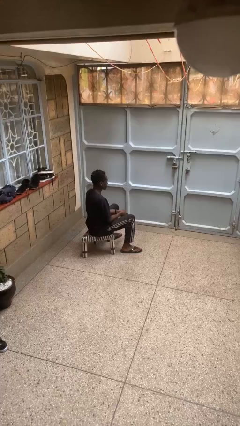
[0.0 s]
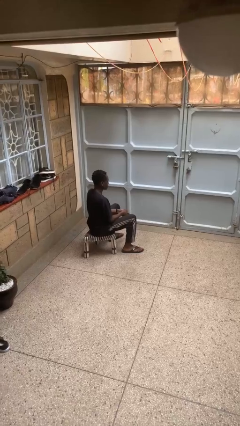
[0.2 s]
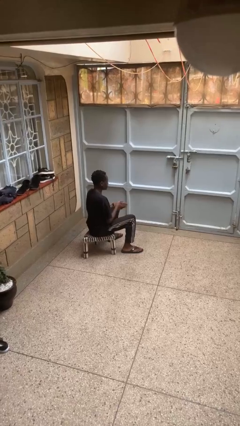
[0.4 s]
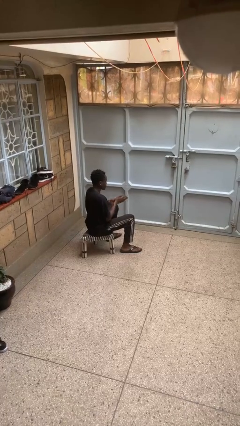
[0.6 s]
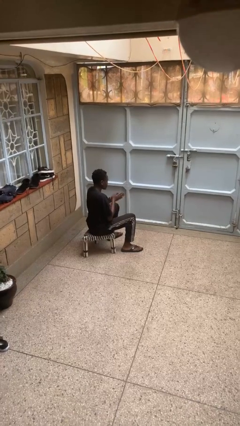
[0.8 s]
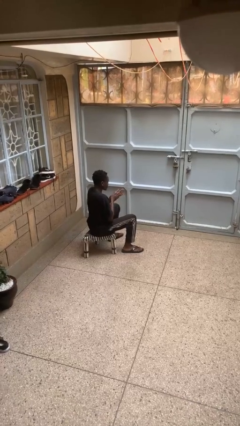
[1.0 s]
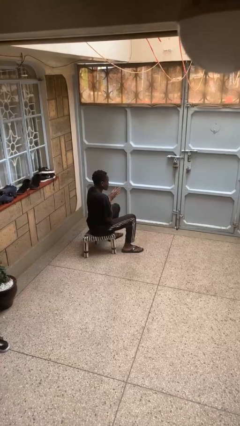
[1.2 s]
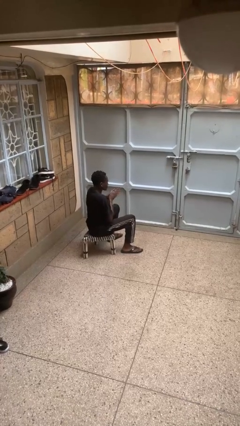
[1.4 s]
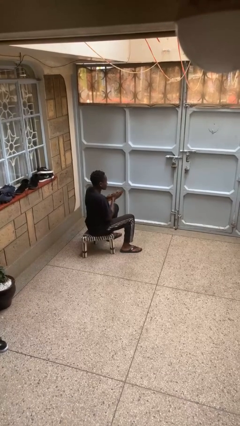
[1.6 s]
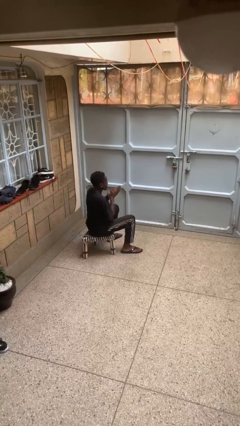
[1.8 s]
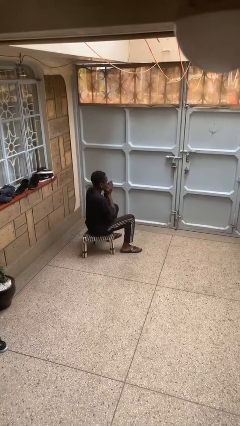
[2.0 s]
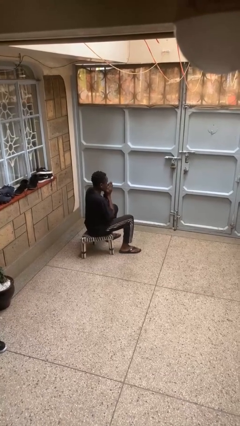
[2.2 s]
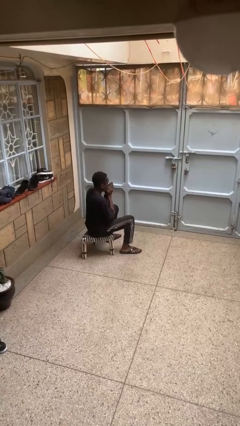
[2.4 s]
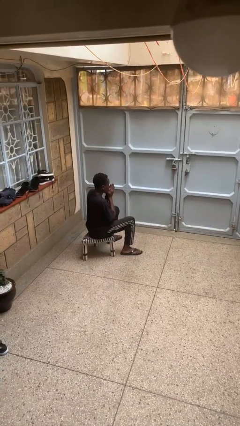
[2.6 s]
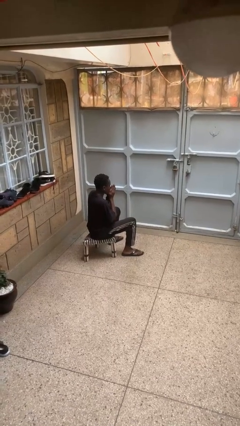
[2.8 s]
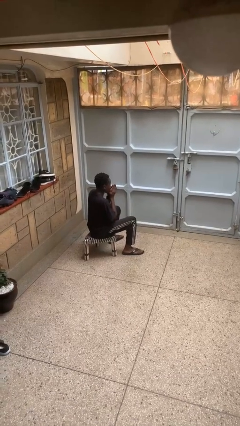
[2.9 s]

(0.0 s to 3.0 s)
person blows into hands

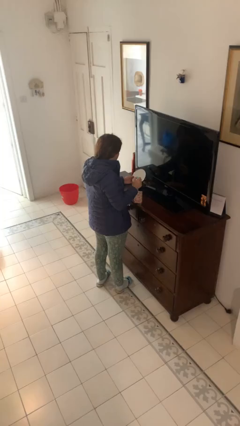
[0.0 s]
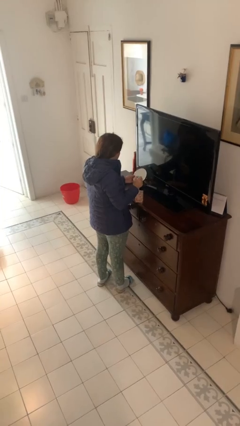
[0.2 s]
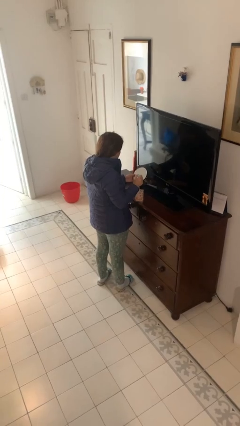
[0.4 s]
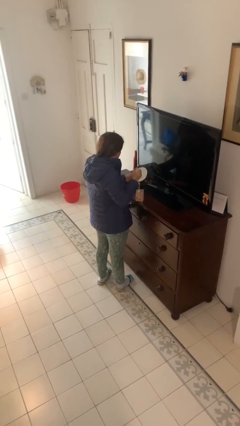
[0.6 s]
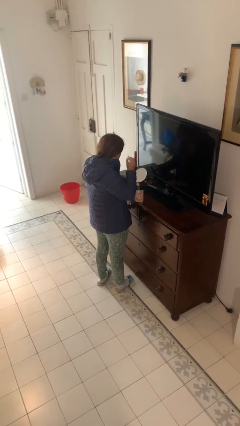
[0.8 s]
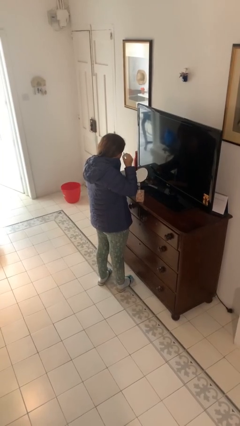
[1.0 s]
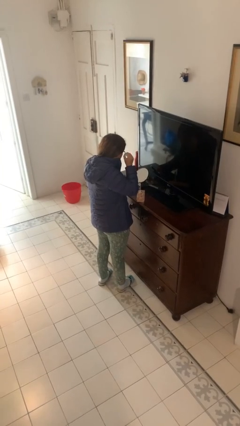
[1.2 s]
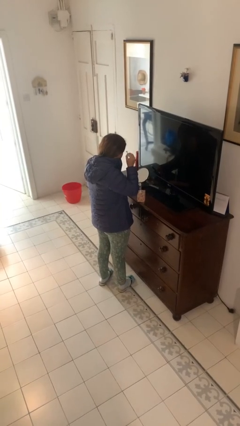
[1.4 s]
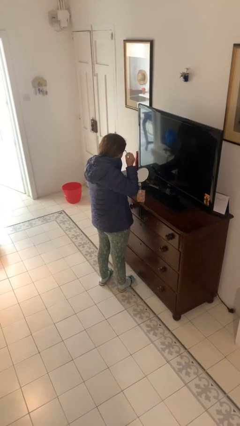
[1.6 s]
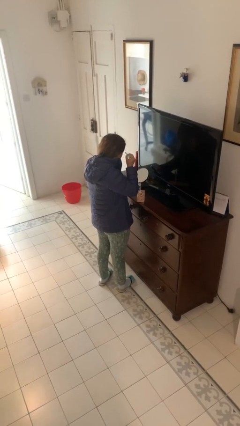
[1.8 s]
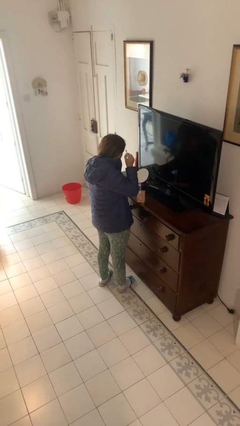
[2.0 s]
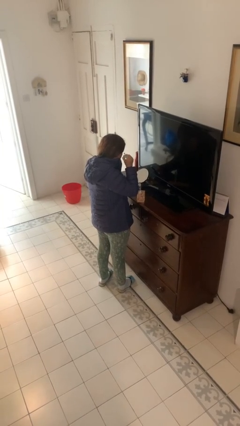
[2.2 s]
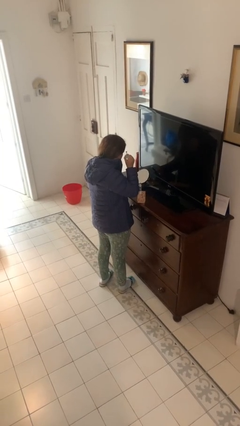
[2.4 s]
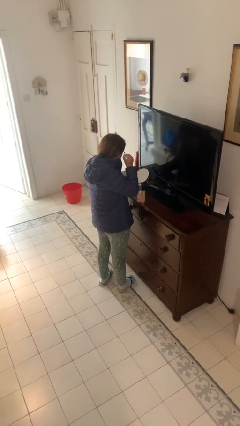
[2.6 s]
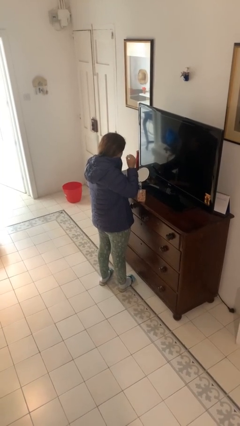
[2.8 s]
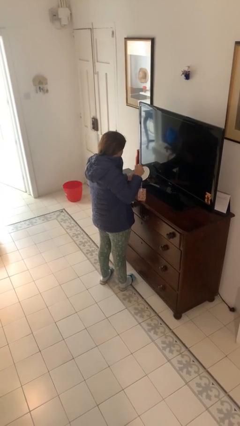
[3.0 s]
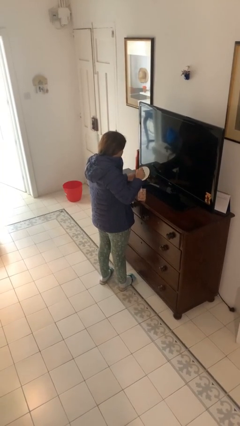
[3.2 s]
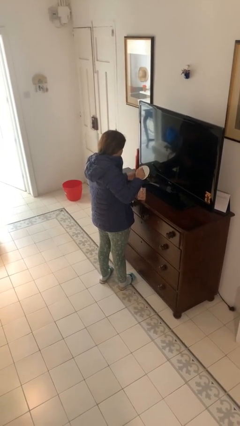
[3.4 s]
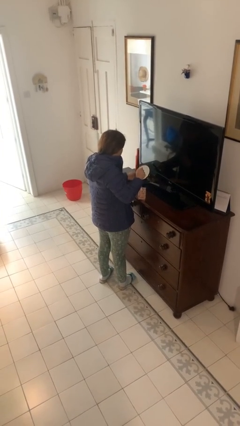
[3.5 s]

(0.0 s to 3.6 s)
person applies eye makeup

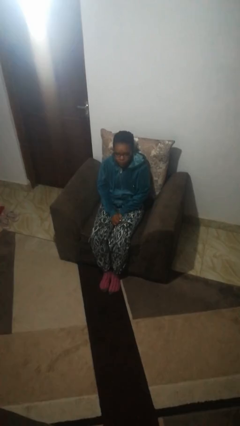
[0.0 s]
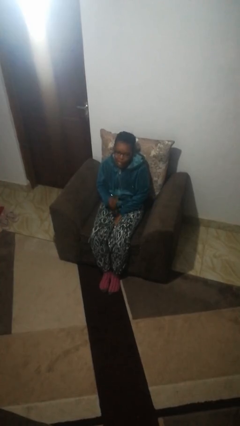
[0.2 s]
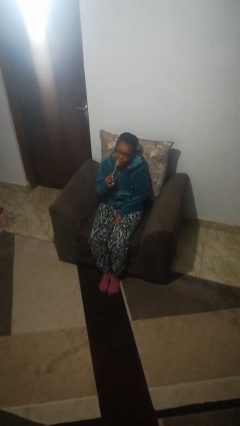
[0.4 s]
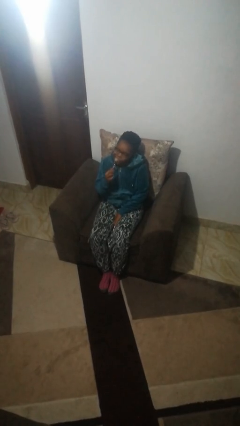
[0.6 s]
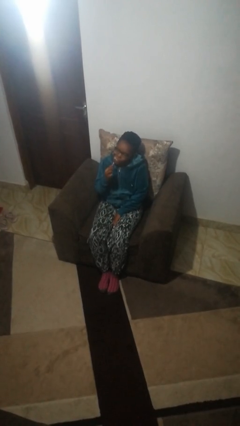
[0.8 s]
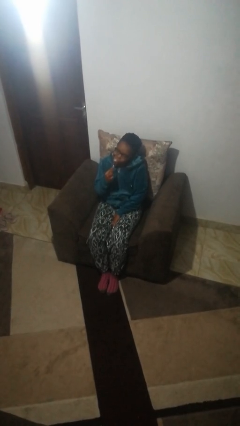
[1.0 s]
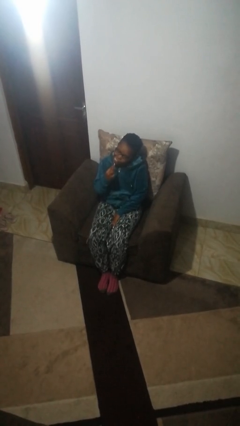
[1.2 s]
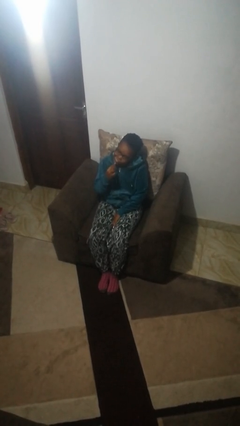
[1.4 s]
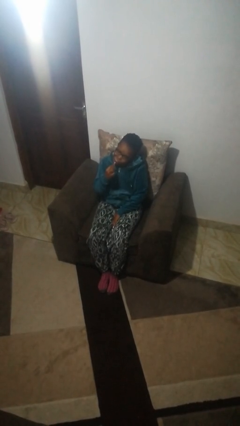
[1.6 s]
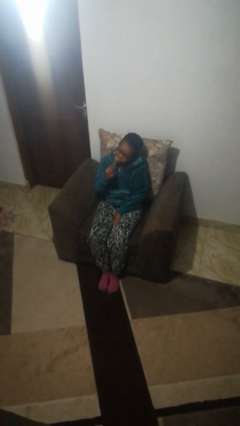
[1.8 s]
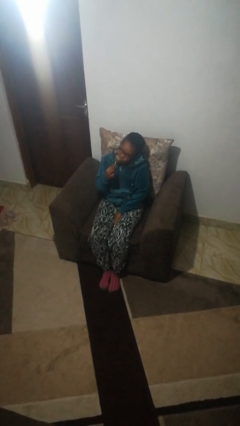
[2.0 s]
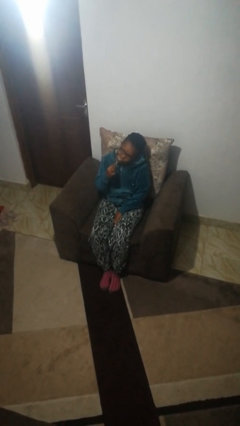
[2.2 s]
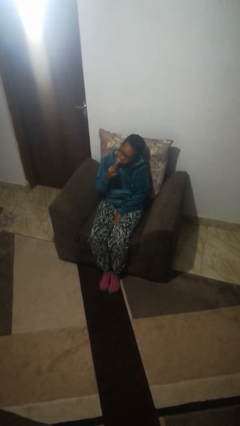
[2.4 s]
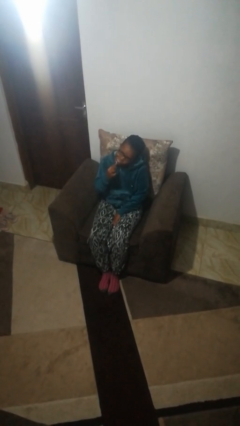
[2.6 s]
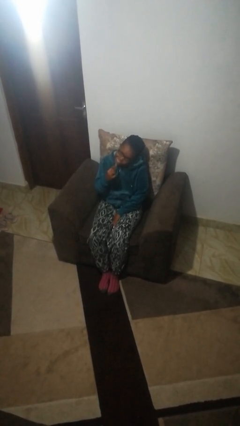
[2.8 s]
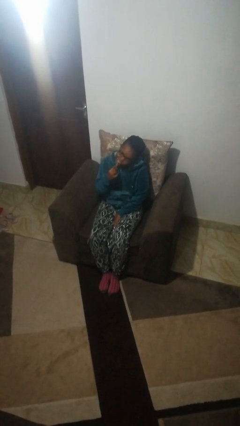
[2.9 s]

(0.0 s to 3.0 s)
person brushes teeth

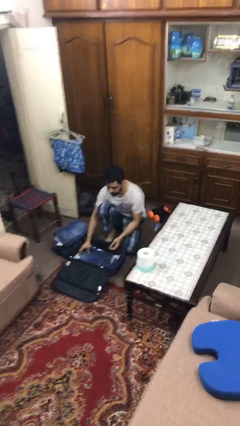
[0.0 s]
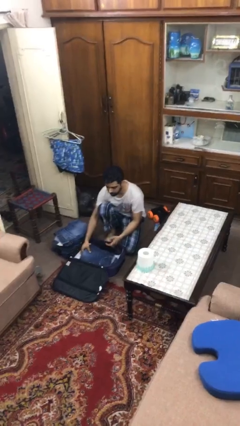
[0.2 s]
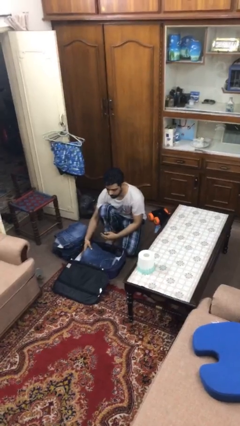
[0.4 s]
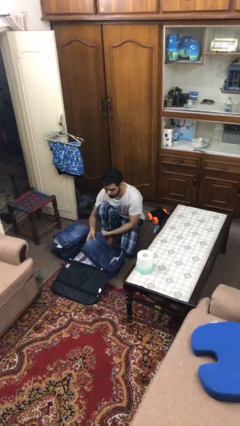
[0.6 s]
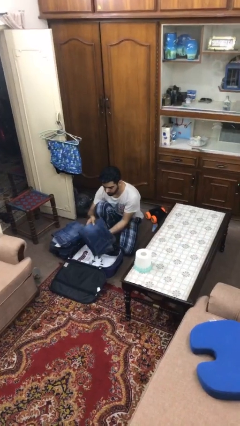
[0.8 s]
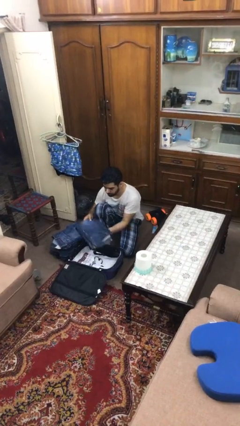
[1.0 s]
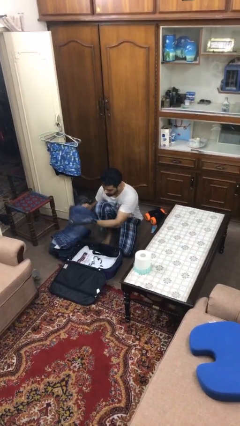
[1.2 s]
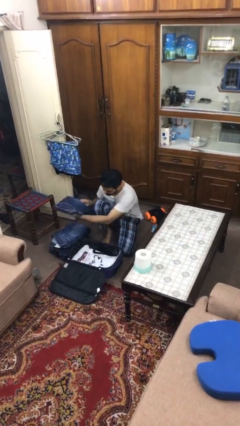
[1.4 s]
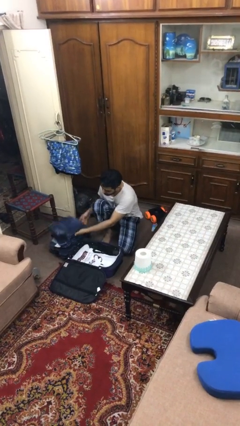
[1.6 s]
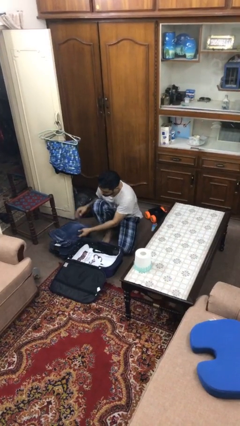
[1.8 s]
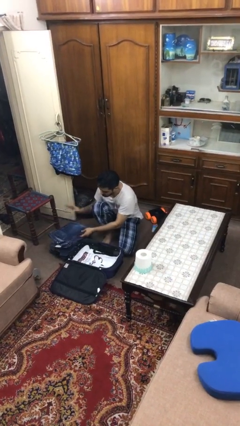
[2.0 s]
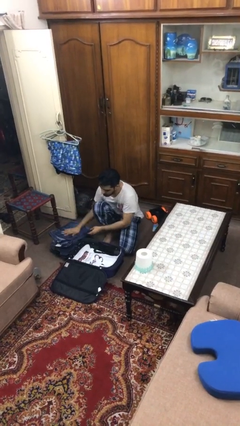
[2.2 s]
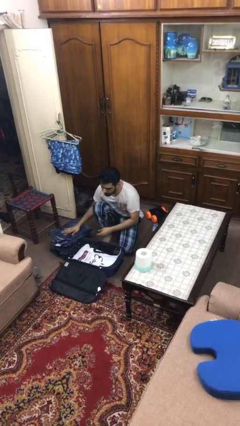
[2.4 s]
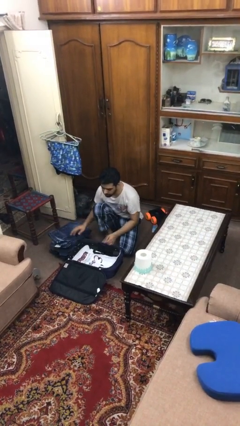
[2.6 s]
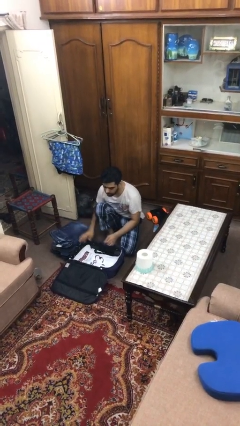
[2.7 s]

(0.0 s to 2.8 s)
person unloads clothes from suitcase

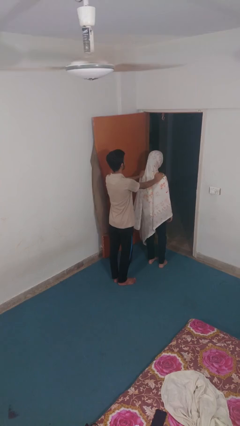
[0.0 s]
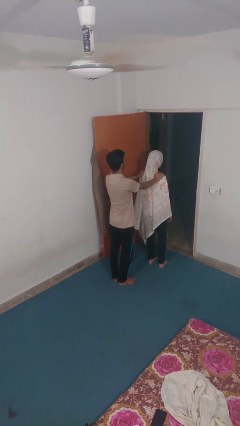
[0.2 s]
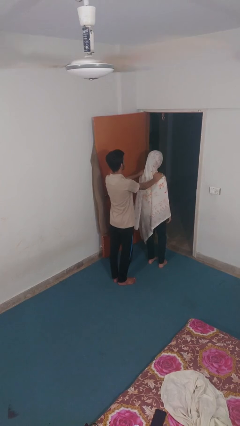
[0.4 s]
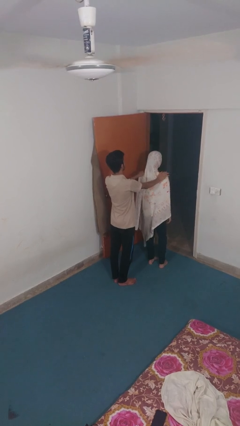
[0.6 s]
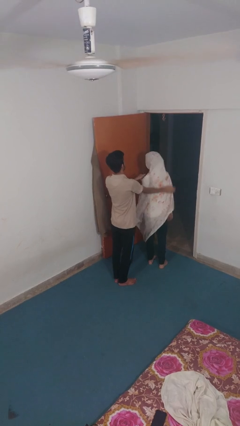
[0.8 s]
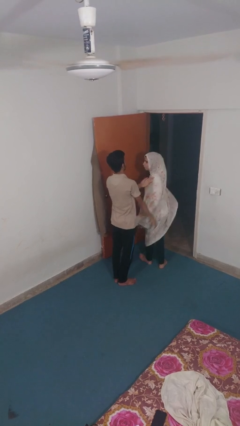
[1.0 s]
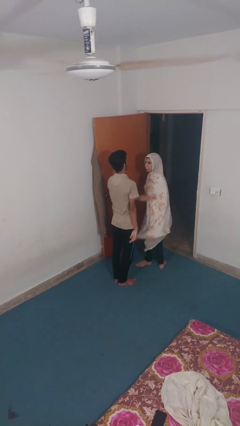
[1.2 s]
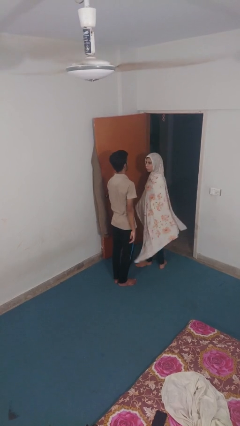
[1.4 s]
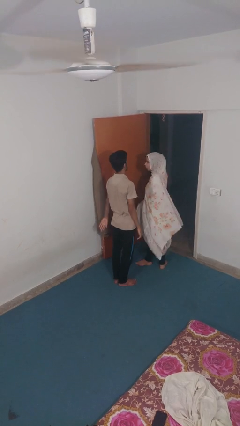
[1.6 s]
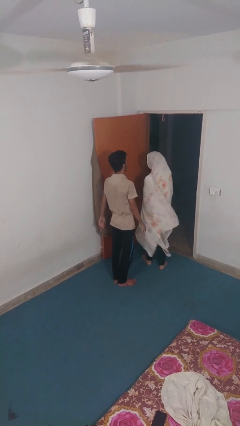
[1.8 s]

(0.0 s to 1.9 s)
person spins person around

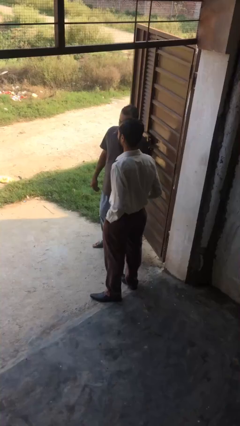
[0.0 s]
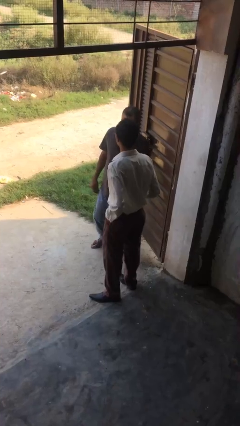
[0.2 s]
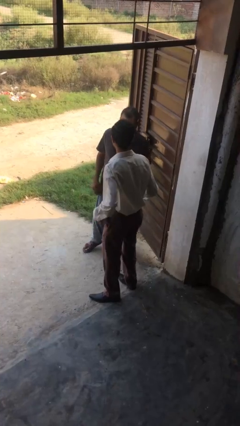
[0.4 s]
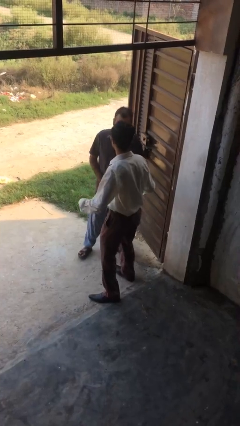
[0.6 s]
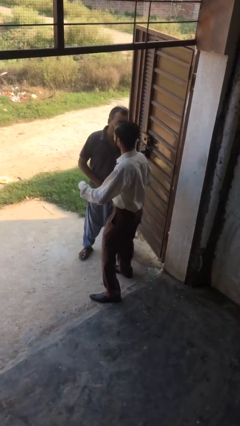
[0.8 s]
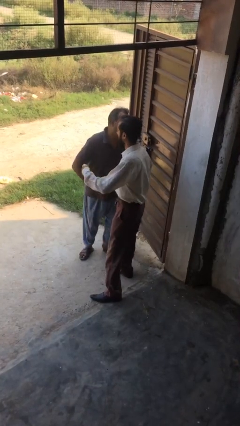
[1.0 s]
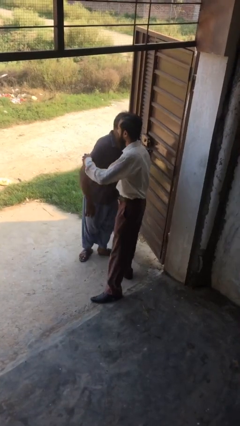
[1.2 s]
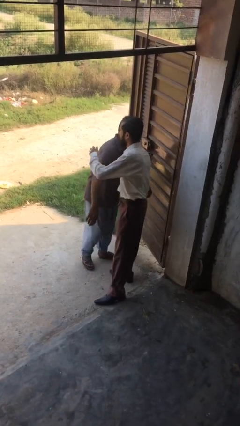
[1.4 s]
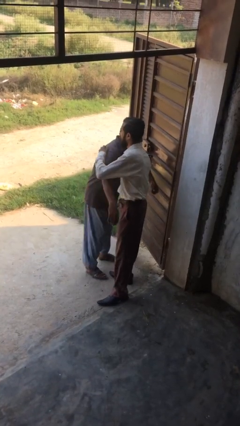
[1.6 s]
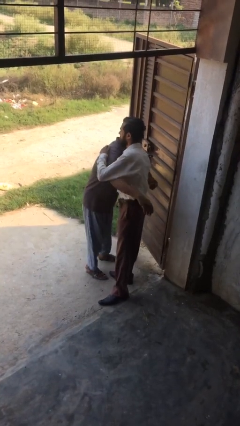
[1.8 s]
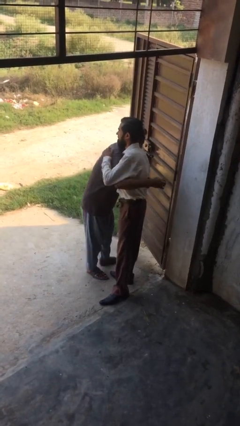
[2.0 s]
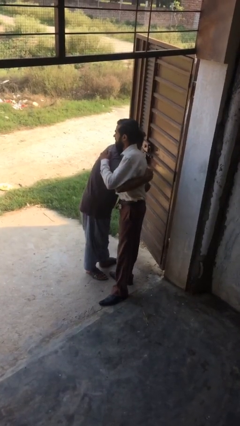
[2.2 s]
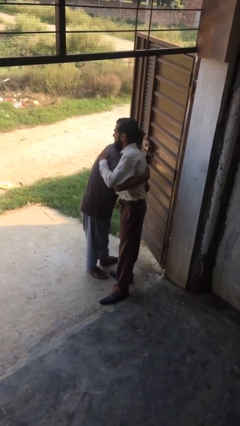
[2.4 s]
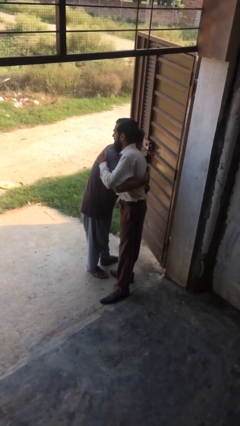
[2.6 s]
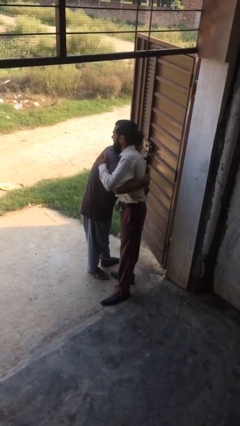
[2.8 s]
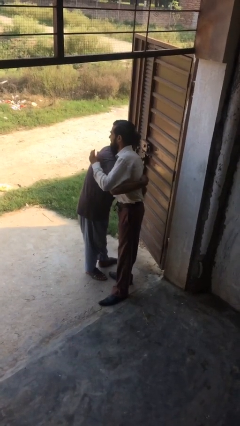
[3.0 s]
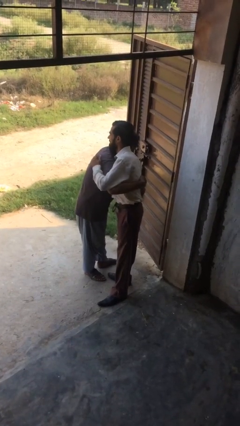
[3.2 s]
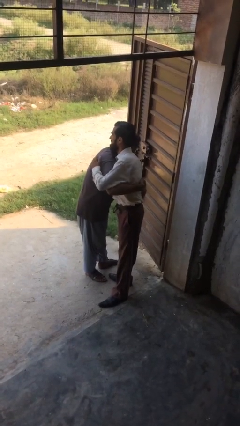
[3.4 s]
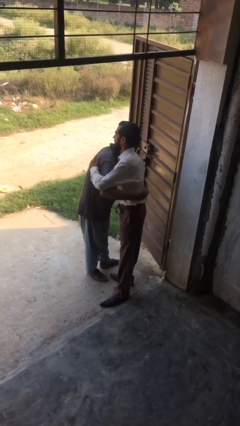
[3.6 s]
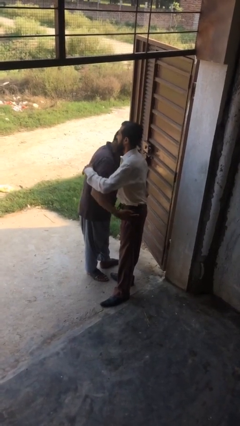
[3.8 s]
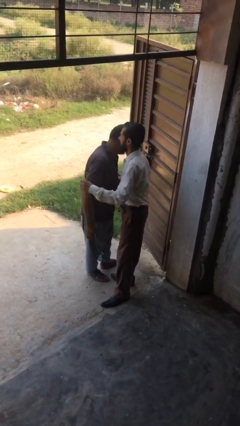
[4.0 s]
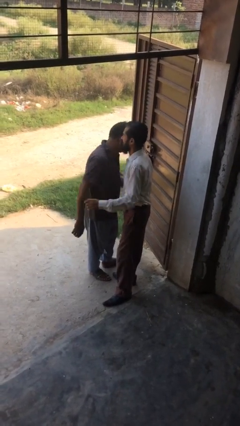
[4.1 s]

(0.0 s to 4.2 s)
person embraces person
